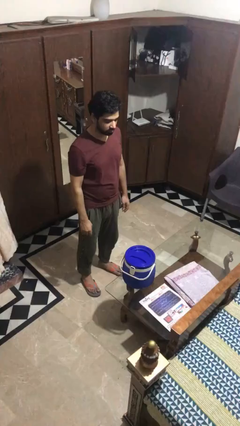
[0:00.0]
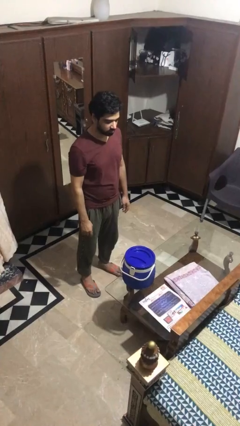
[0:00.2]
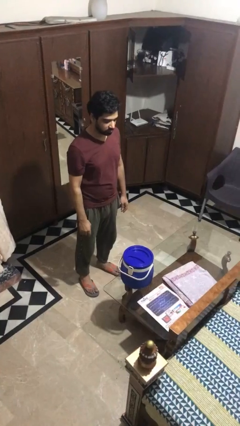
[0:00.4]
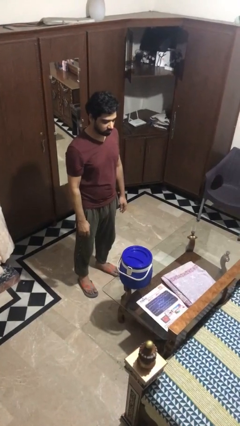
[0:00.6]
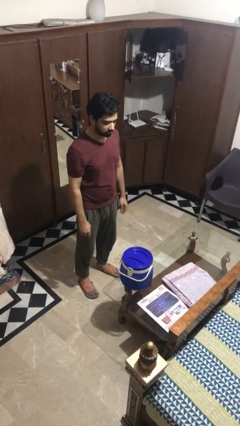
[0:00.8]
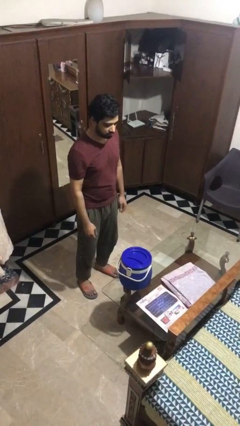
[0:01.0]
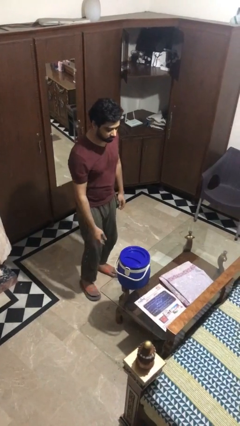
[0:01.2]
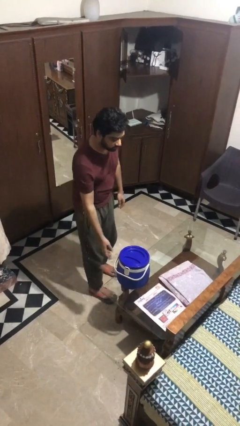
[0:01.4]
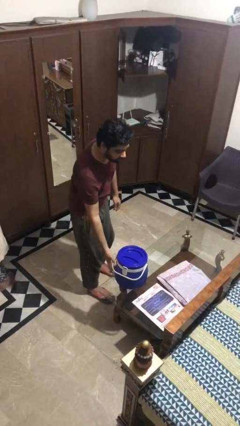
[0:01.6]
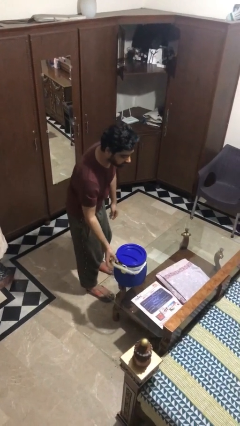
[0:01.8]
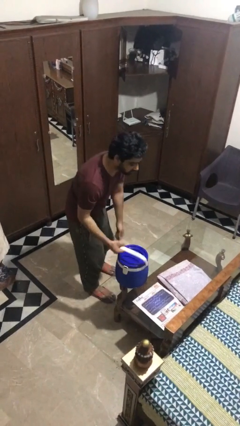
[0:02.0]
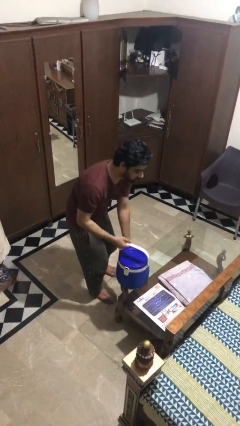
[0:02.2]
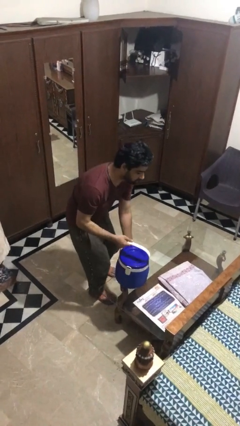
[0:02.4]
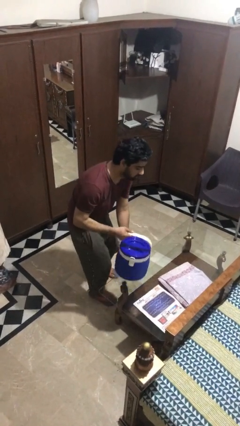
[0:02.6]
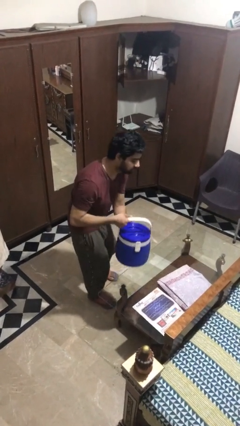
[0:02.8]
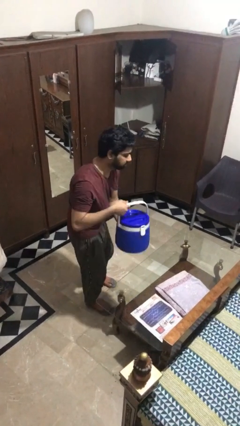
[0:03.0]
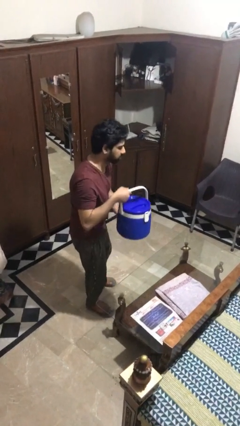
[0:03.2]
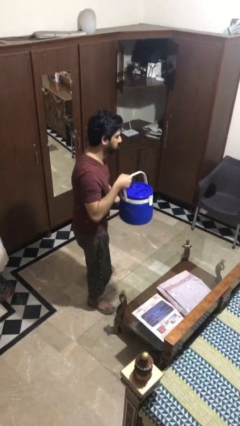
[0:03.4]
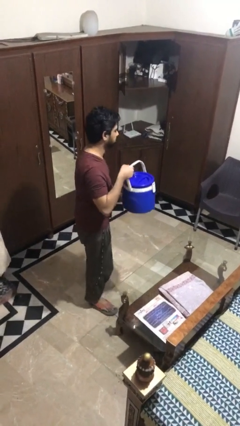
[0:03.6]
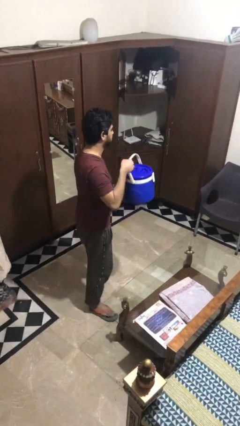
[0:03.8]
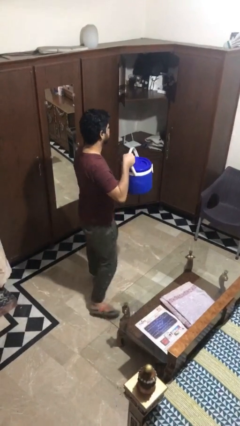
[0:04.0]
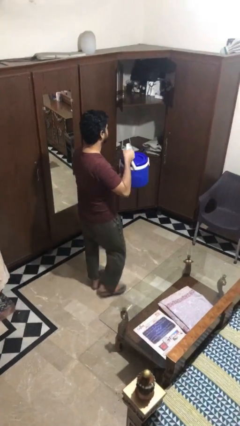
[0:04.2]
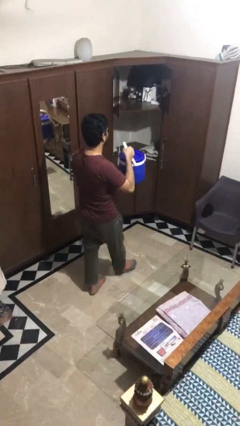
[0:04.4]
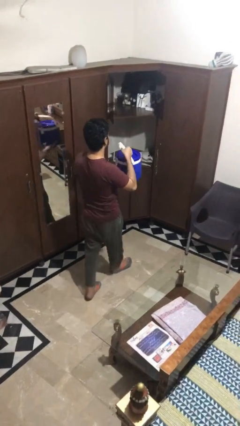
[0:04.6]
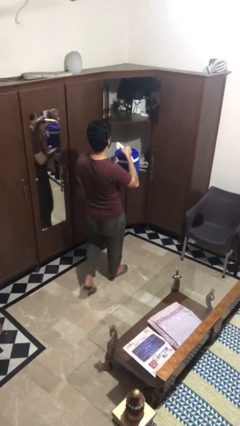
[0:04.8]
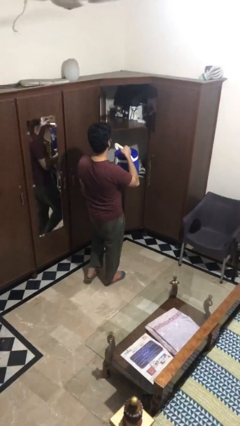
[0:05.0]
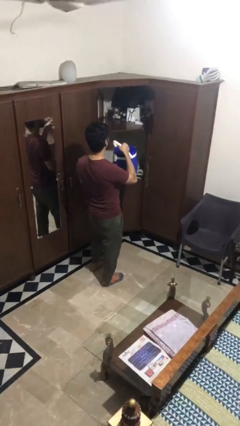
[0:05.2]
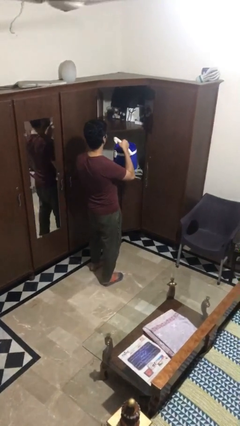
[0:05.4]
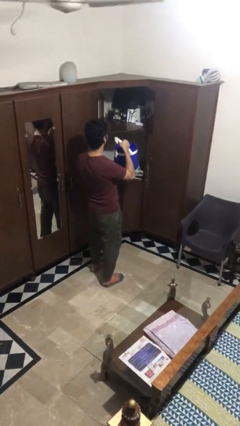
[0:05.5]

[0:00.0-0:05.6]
person picks up object from table

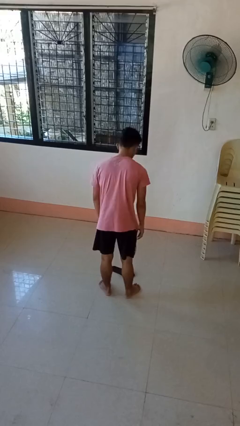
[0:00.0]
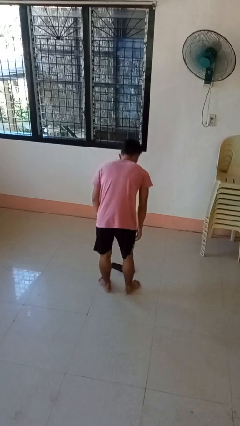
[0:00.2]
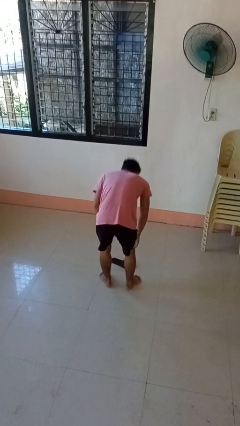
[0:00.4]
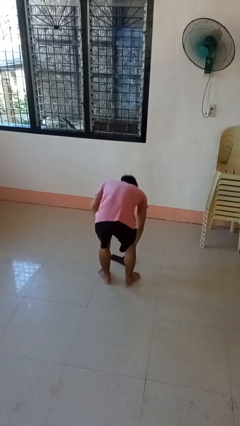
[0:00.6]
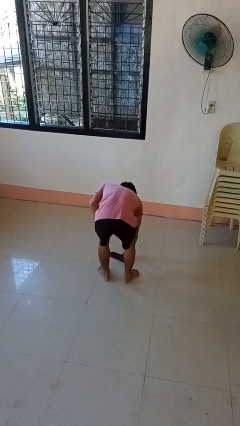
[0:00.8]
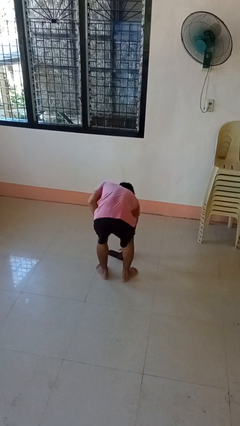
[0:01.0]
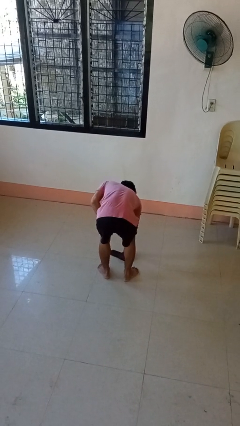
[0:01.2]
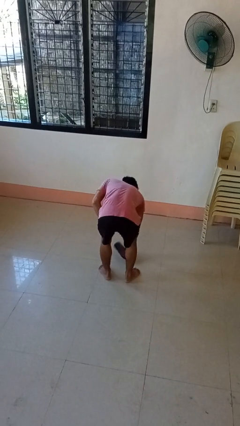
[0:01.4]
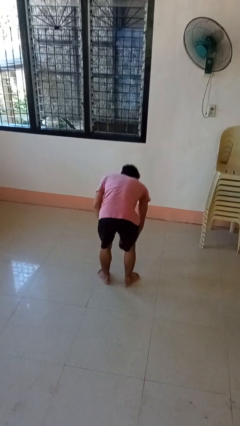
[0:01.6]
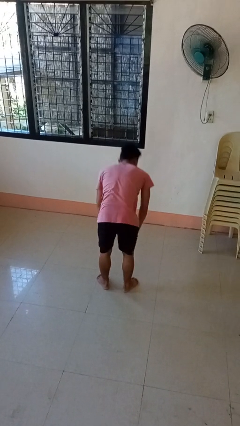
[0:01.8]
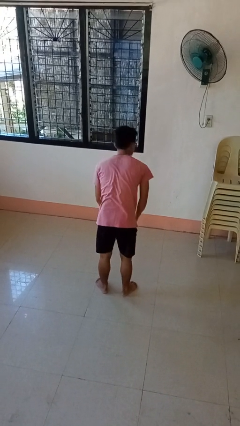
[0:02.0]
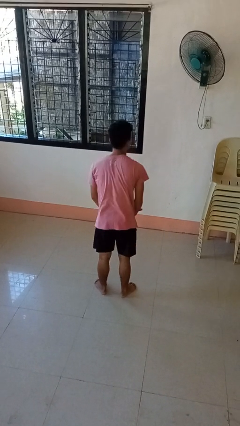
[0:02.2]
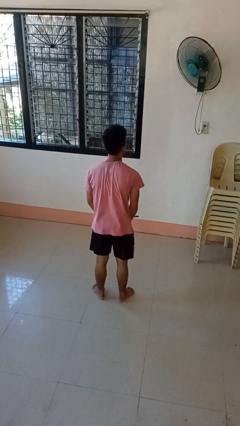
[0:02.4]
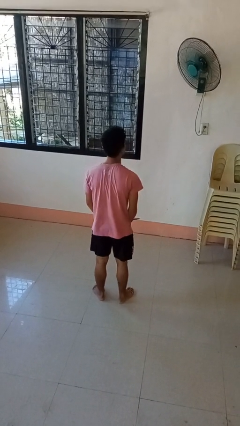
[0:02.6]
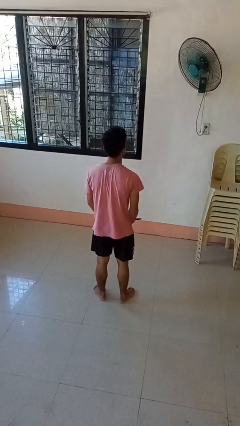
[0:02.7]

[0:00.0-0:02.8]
person picks up object from floor

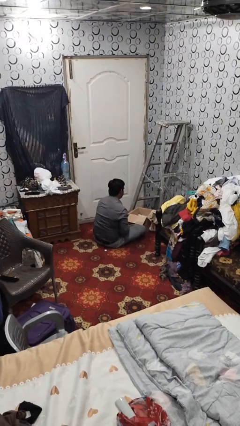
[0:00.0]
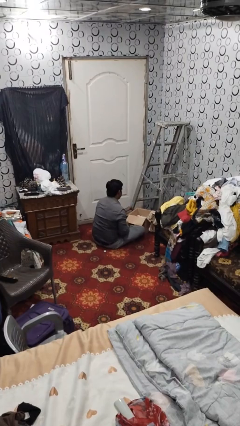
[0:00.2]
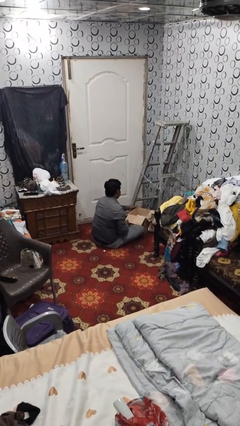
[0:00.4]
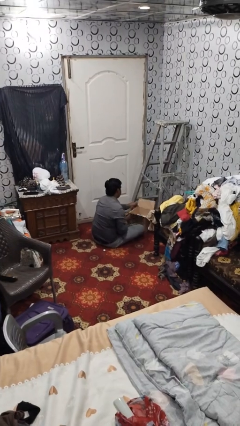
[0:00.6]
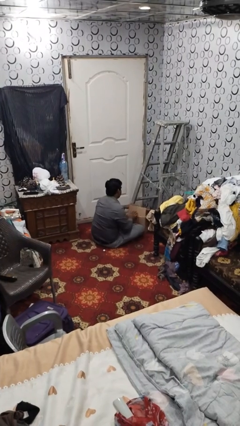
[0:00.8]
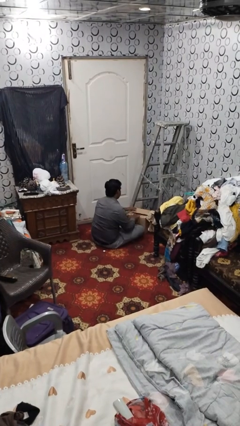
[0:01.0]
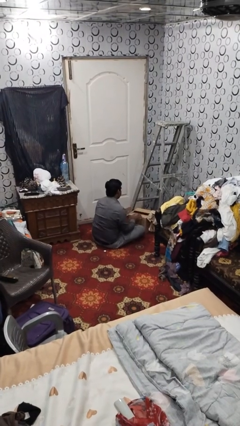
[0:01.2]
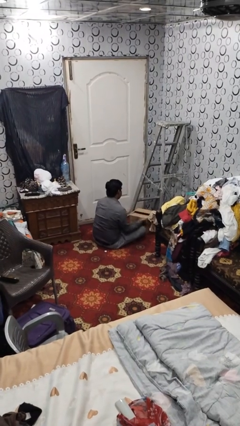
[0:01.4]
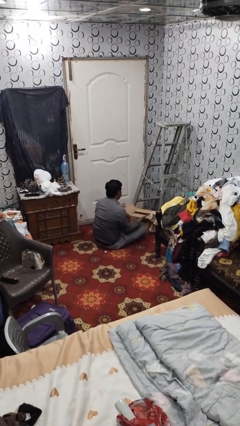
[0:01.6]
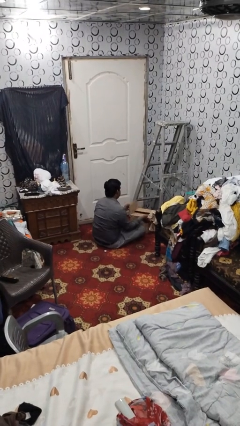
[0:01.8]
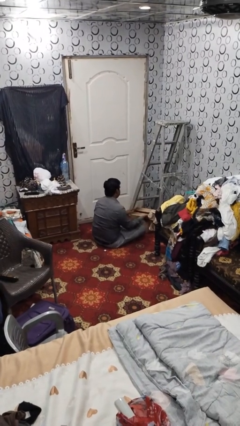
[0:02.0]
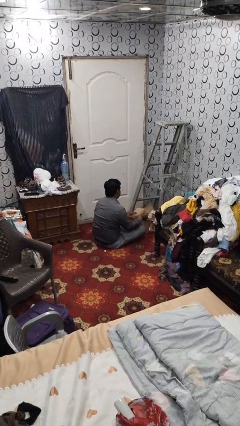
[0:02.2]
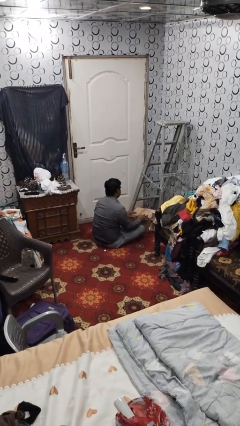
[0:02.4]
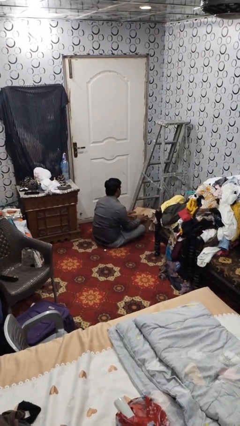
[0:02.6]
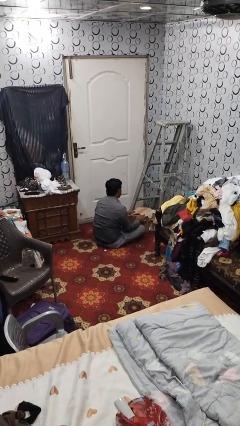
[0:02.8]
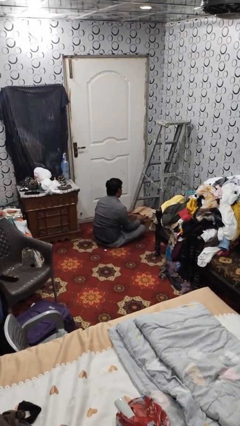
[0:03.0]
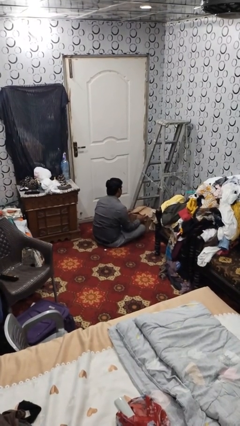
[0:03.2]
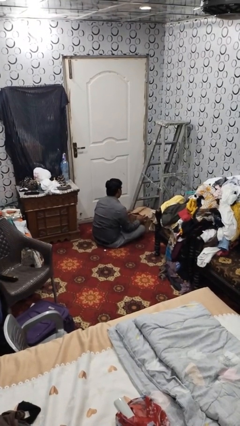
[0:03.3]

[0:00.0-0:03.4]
person closes box

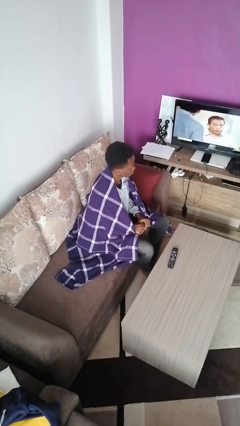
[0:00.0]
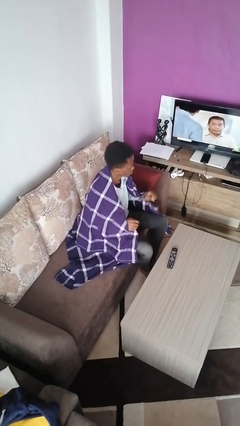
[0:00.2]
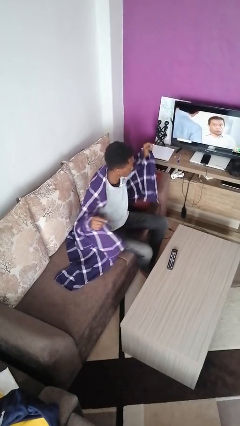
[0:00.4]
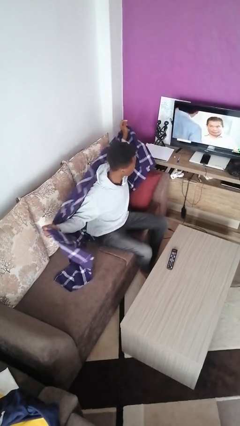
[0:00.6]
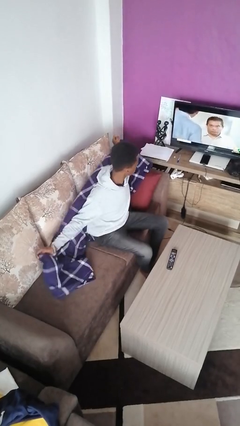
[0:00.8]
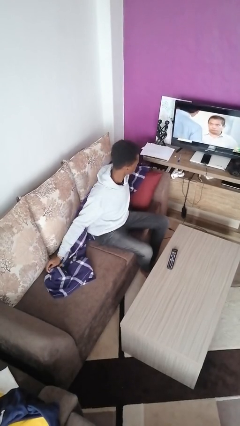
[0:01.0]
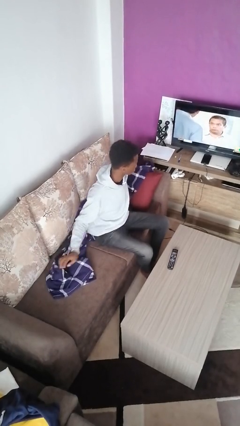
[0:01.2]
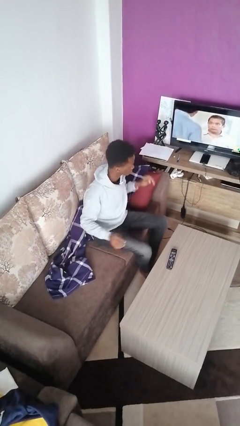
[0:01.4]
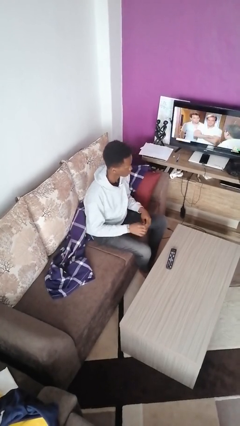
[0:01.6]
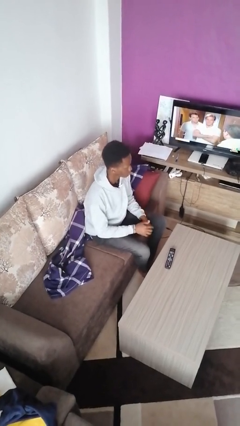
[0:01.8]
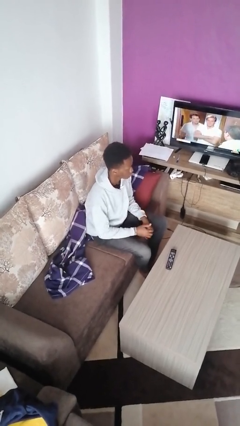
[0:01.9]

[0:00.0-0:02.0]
person uncovers with blanket

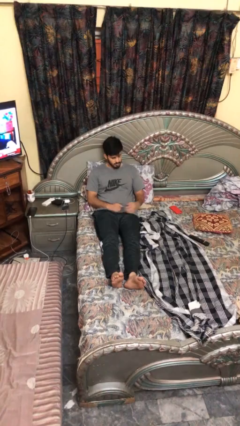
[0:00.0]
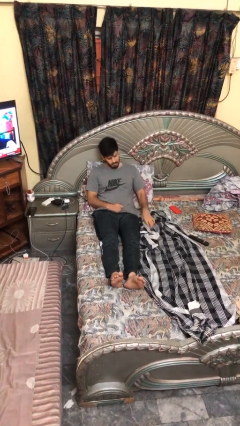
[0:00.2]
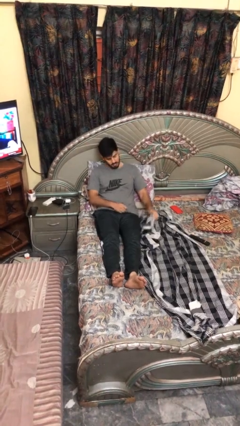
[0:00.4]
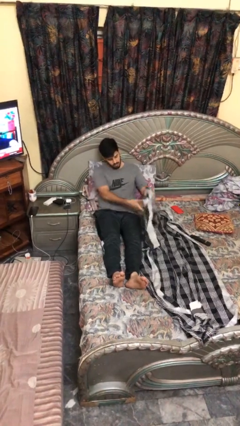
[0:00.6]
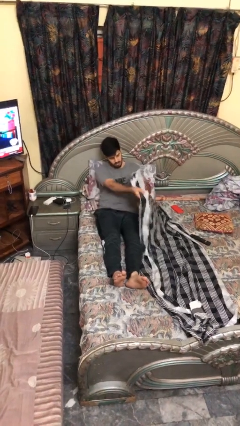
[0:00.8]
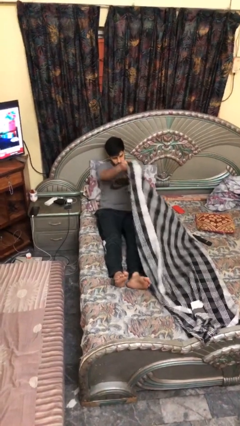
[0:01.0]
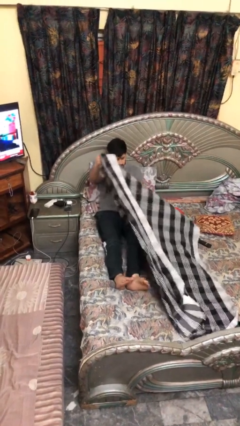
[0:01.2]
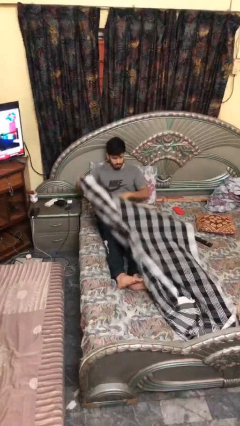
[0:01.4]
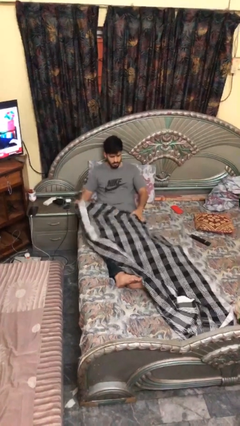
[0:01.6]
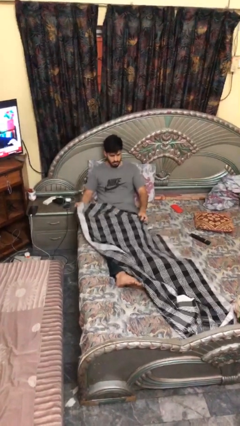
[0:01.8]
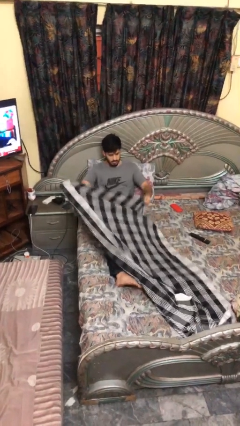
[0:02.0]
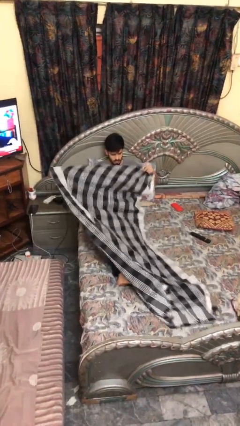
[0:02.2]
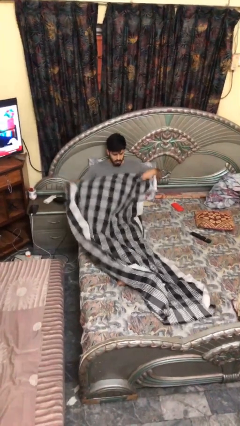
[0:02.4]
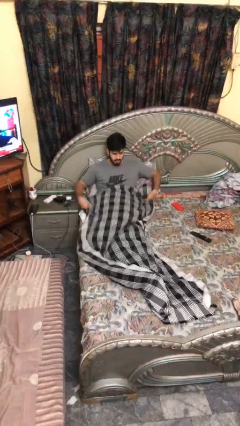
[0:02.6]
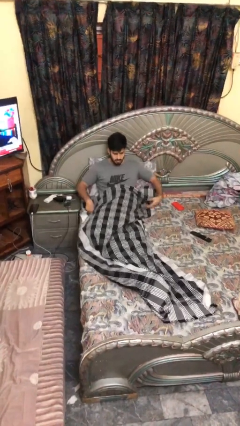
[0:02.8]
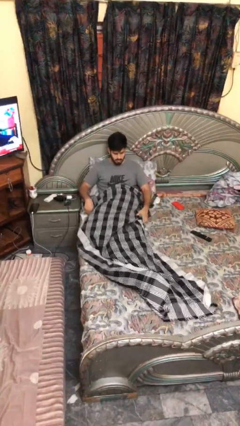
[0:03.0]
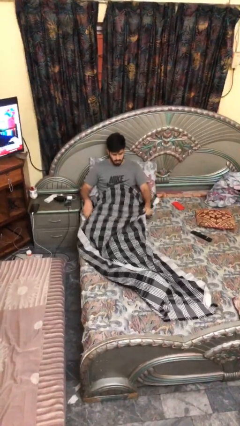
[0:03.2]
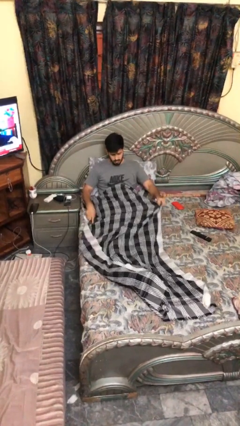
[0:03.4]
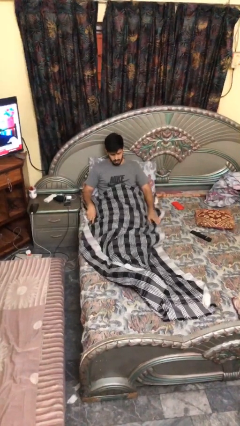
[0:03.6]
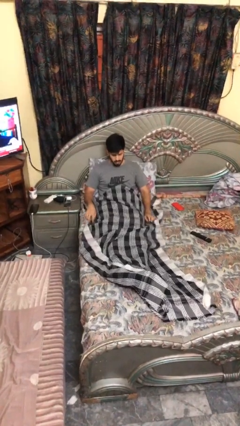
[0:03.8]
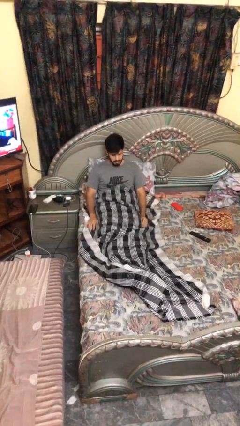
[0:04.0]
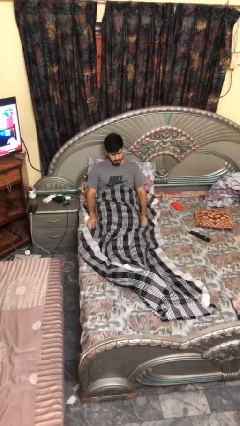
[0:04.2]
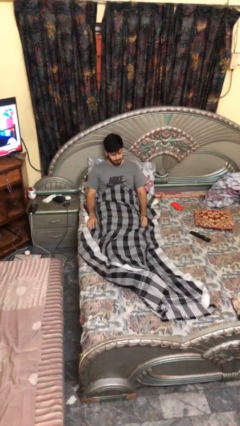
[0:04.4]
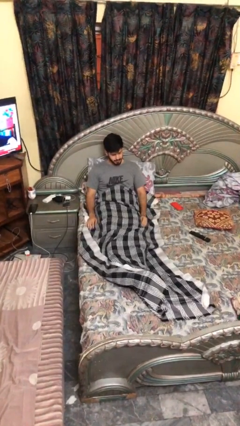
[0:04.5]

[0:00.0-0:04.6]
person covers with bedsheets
